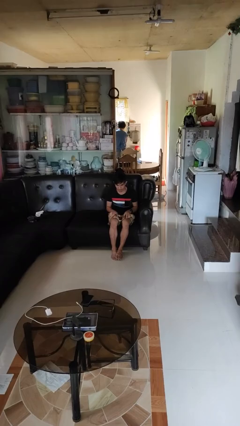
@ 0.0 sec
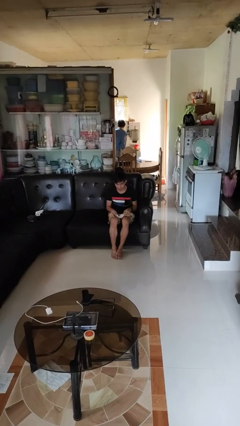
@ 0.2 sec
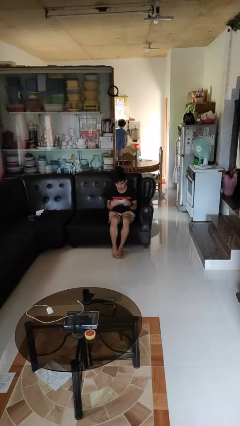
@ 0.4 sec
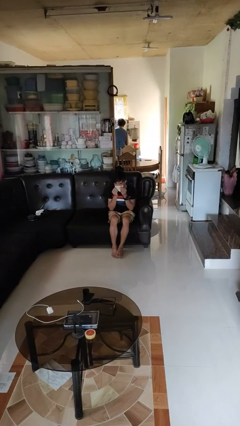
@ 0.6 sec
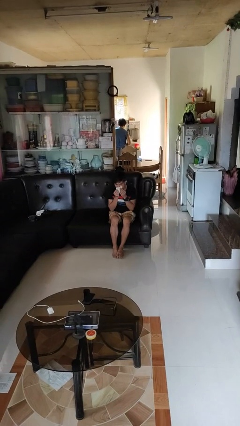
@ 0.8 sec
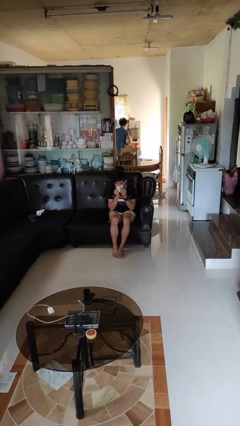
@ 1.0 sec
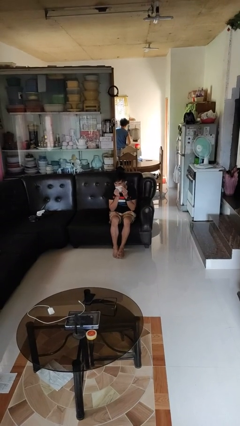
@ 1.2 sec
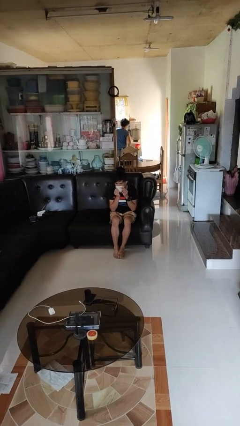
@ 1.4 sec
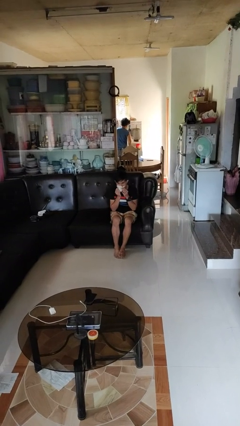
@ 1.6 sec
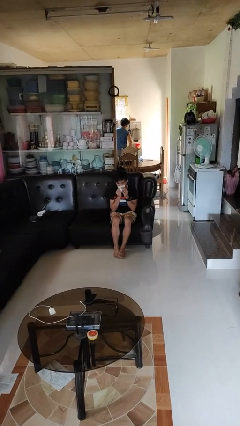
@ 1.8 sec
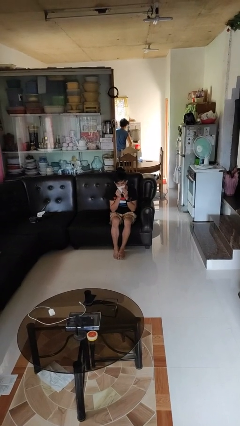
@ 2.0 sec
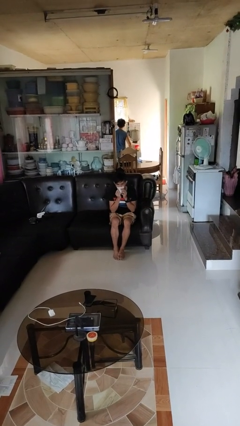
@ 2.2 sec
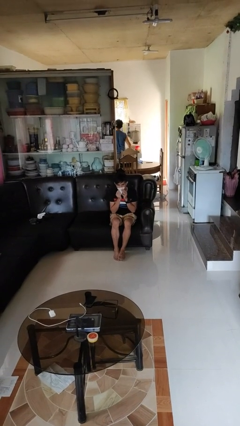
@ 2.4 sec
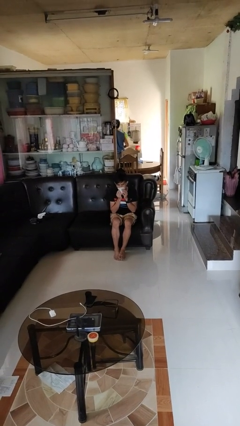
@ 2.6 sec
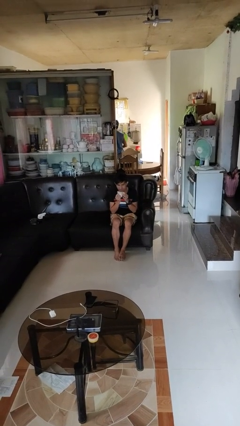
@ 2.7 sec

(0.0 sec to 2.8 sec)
person wipes mouth with napkin

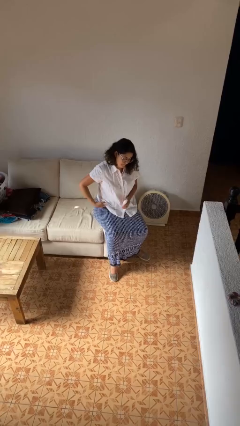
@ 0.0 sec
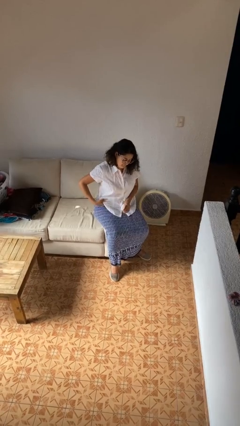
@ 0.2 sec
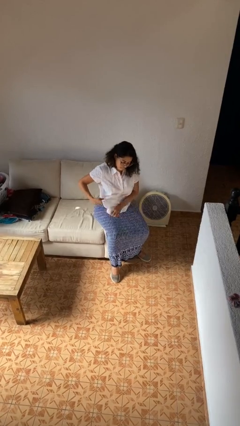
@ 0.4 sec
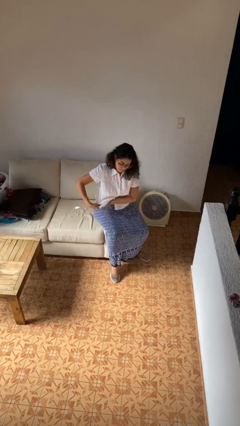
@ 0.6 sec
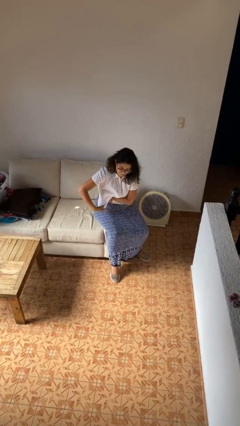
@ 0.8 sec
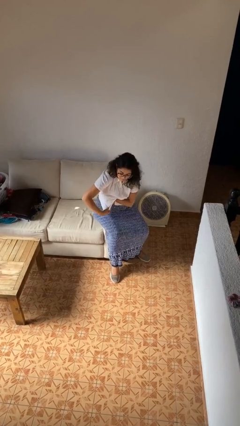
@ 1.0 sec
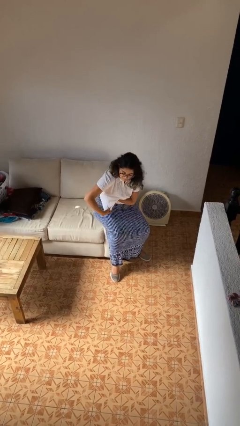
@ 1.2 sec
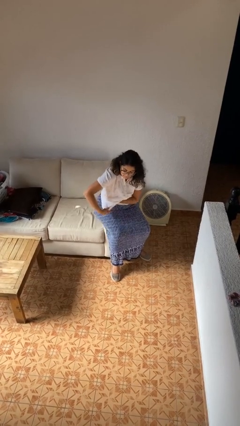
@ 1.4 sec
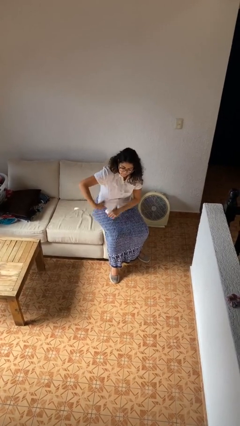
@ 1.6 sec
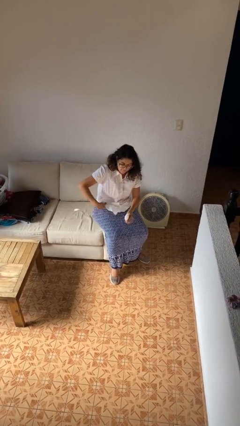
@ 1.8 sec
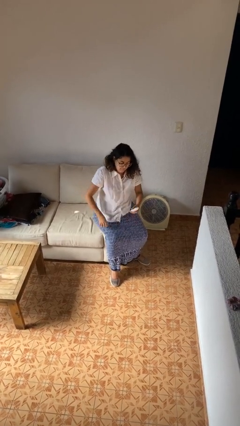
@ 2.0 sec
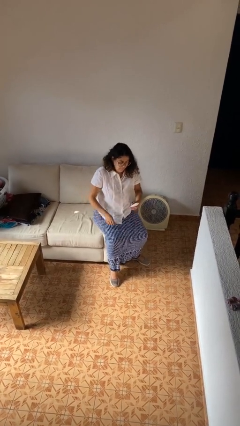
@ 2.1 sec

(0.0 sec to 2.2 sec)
person applies deodorant

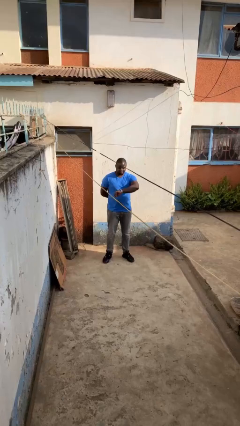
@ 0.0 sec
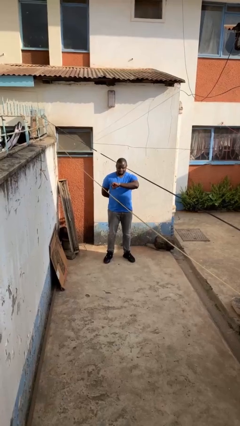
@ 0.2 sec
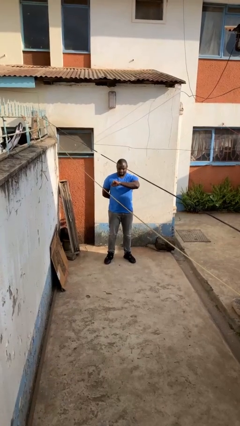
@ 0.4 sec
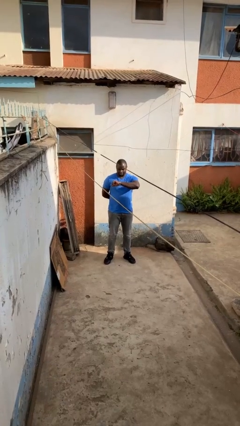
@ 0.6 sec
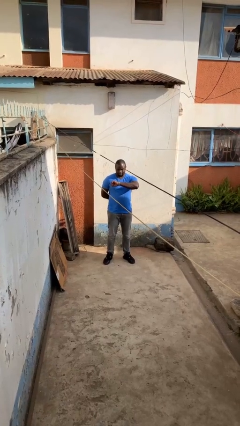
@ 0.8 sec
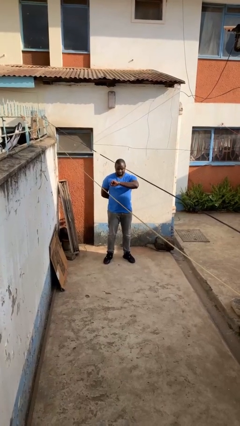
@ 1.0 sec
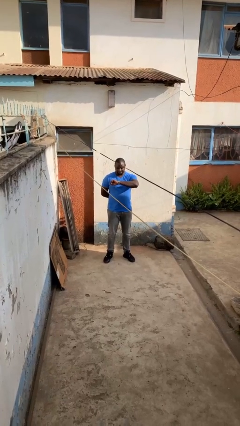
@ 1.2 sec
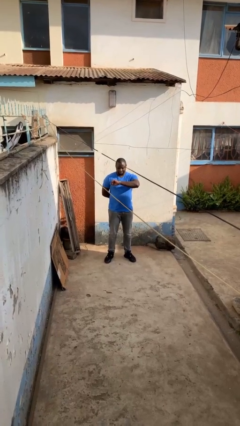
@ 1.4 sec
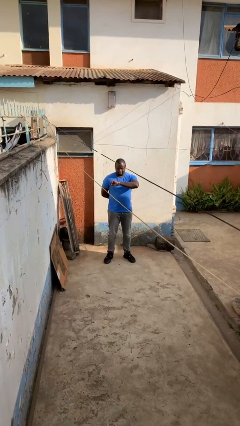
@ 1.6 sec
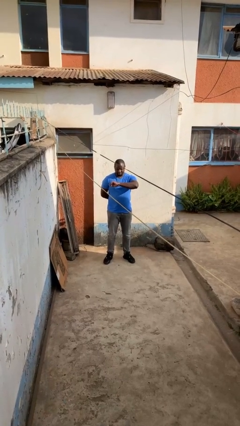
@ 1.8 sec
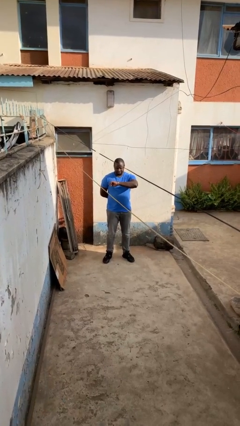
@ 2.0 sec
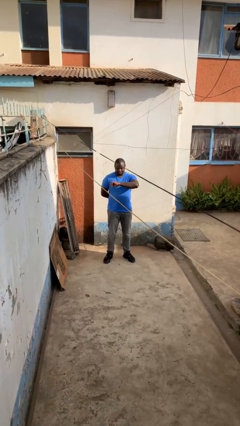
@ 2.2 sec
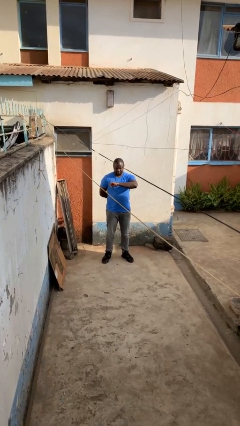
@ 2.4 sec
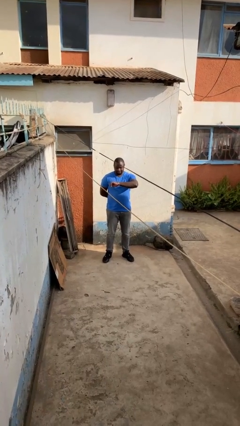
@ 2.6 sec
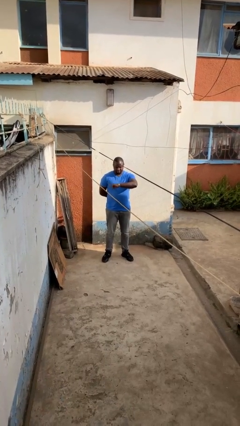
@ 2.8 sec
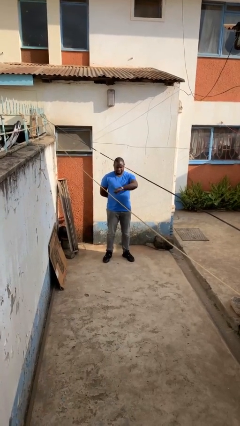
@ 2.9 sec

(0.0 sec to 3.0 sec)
person looks at wristwatch

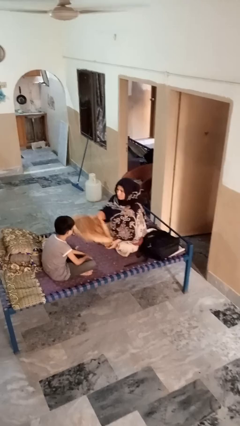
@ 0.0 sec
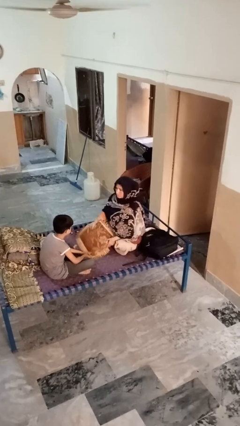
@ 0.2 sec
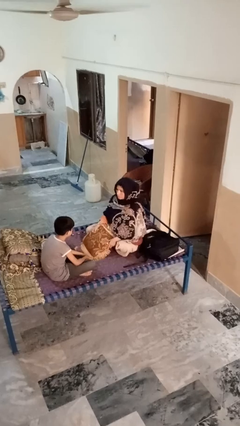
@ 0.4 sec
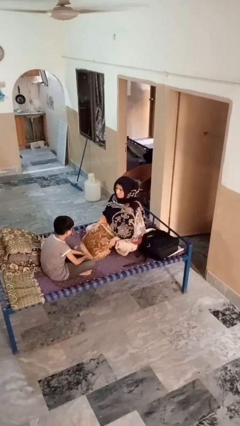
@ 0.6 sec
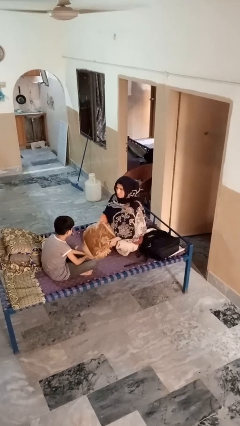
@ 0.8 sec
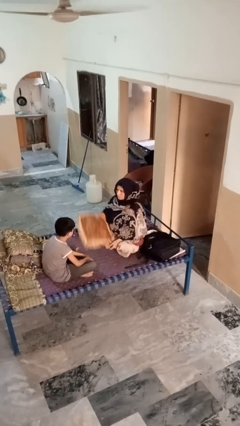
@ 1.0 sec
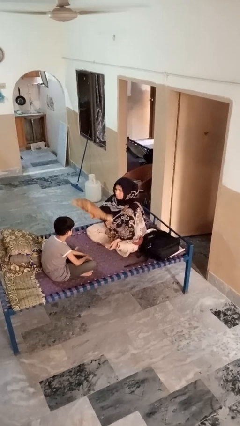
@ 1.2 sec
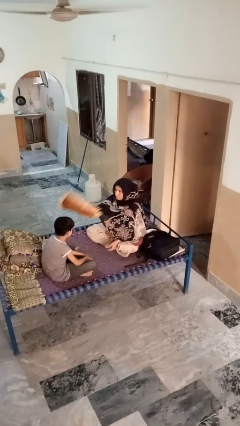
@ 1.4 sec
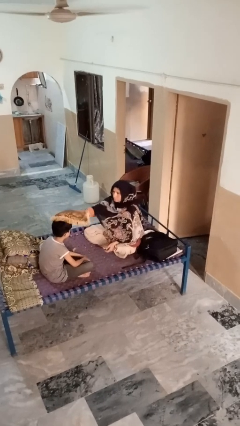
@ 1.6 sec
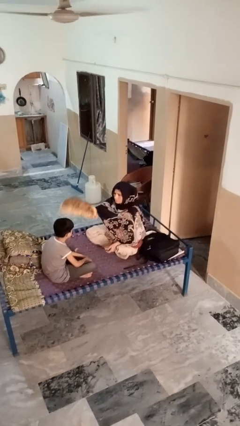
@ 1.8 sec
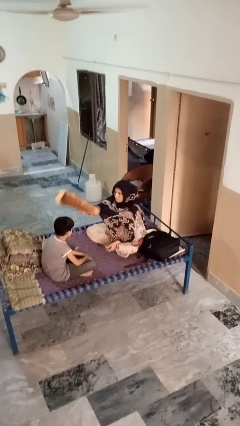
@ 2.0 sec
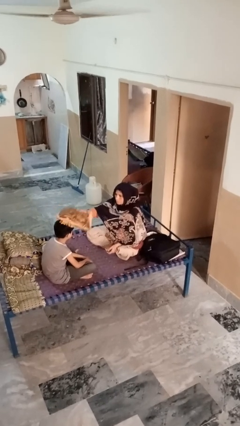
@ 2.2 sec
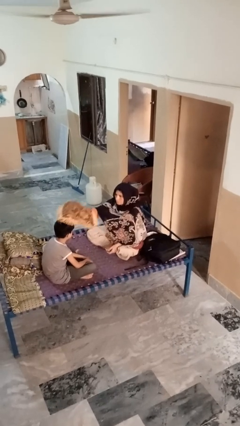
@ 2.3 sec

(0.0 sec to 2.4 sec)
person hits person with pillow

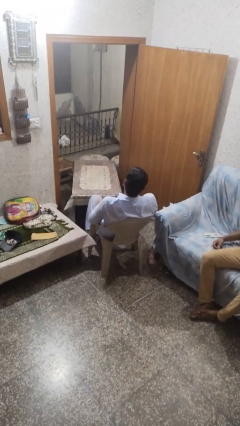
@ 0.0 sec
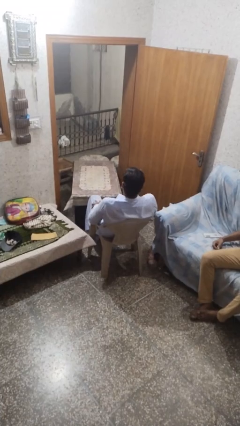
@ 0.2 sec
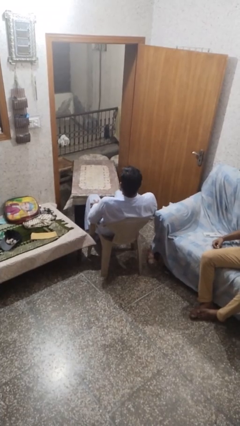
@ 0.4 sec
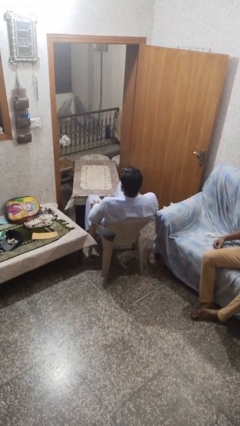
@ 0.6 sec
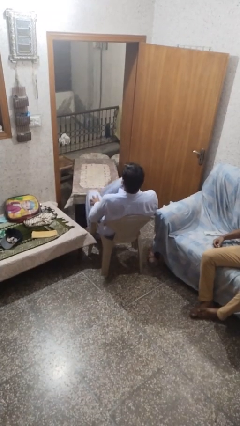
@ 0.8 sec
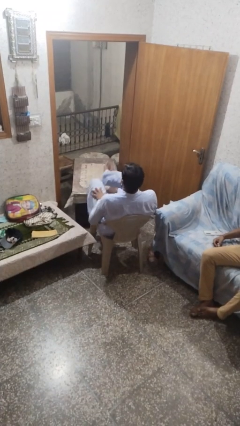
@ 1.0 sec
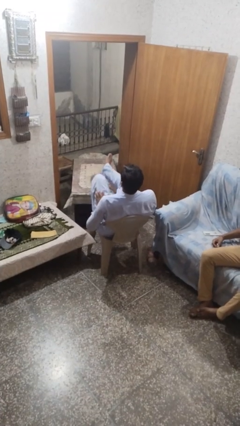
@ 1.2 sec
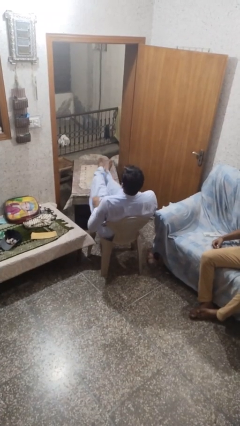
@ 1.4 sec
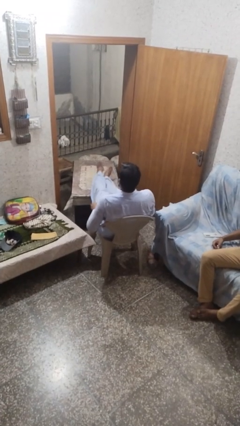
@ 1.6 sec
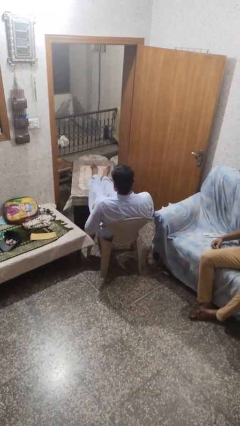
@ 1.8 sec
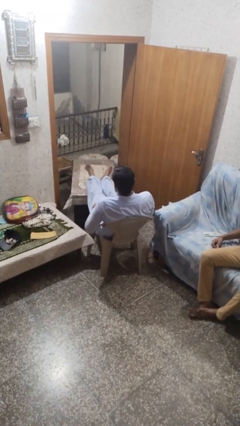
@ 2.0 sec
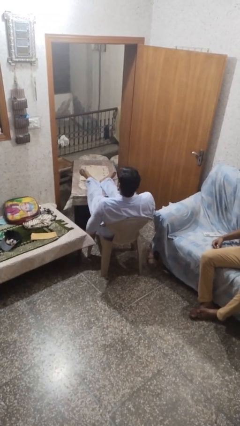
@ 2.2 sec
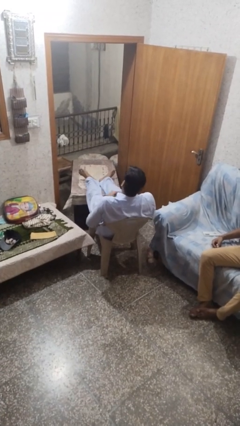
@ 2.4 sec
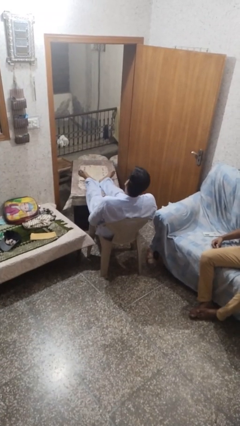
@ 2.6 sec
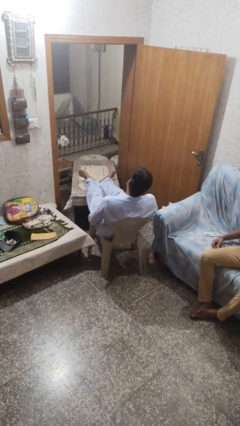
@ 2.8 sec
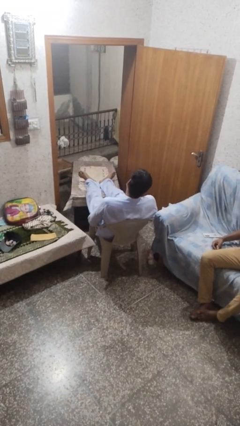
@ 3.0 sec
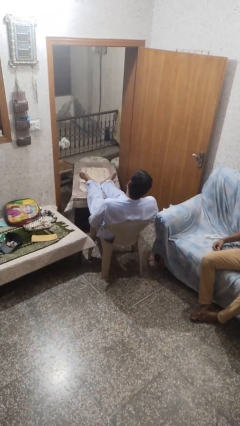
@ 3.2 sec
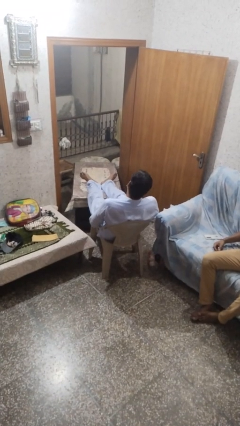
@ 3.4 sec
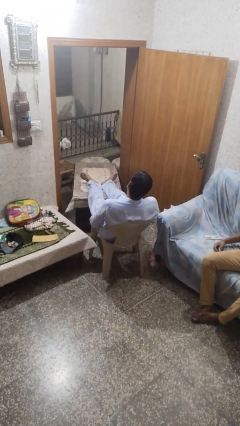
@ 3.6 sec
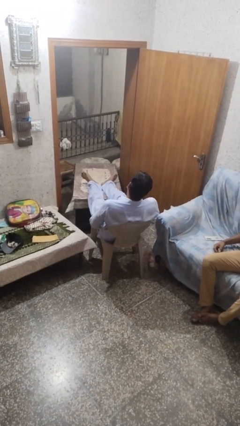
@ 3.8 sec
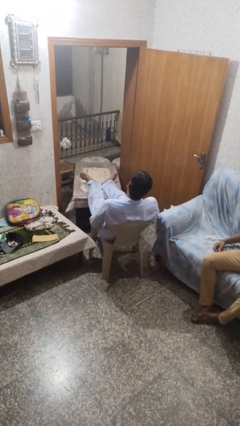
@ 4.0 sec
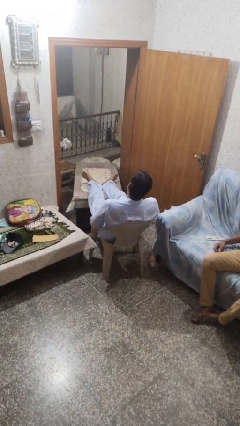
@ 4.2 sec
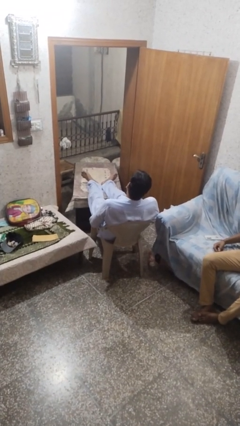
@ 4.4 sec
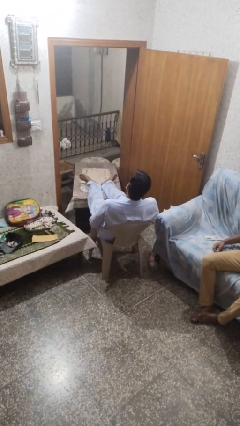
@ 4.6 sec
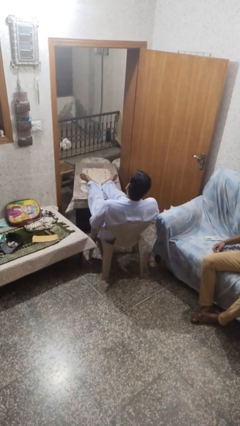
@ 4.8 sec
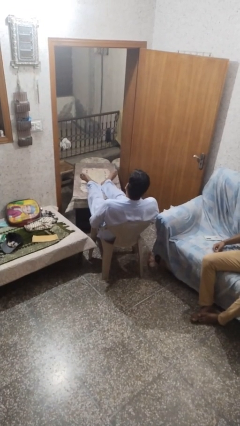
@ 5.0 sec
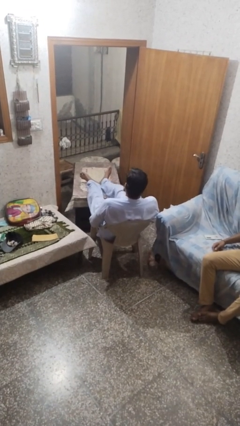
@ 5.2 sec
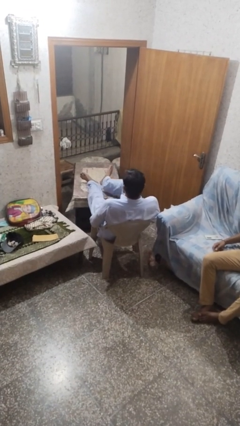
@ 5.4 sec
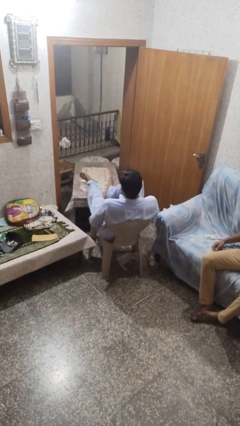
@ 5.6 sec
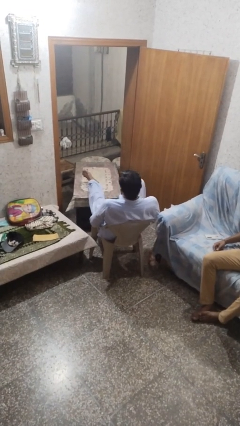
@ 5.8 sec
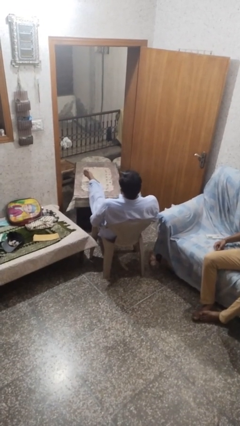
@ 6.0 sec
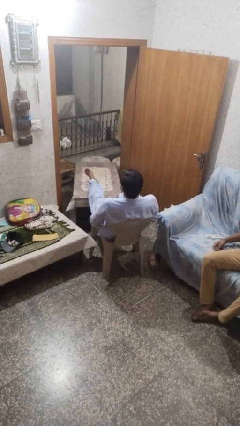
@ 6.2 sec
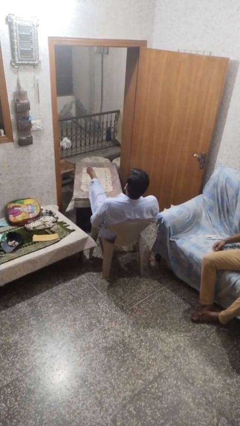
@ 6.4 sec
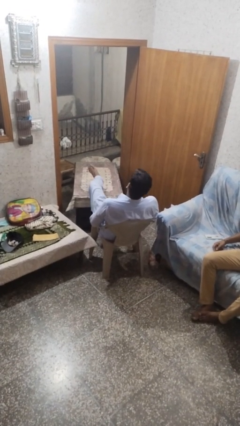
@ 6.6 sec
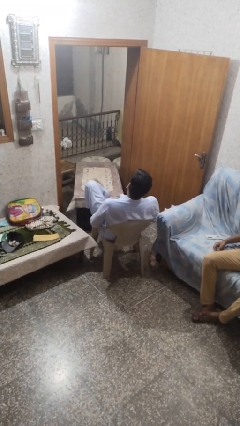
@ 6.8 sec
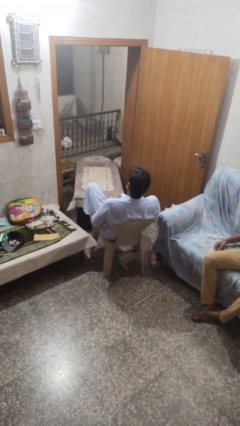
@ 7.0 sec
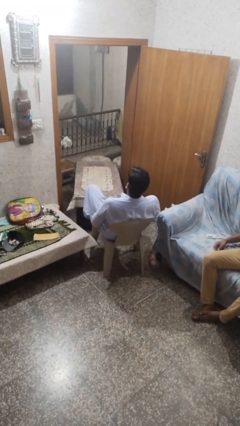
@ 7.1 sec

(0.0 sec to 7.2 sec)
person puts feet up
